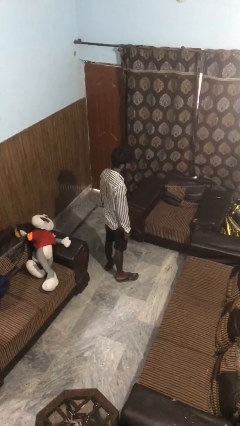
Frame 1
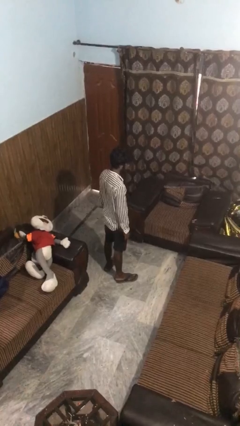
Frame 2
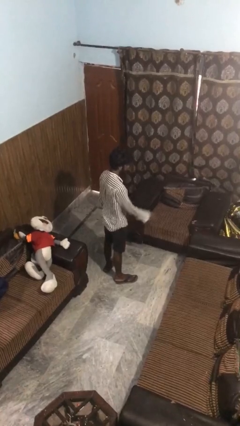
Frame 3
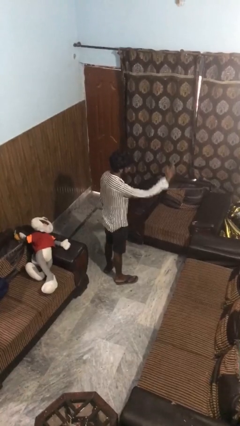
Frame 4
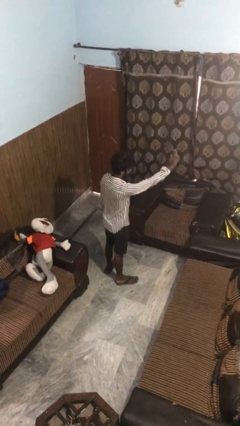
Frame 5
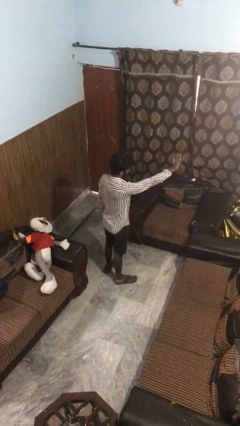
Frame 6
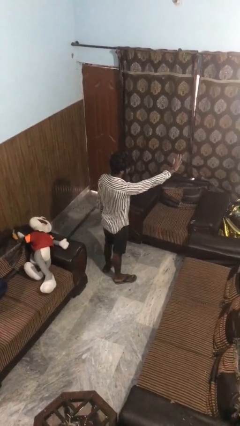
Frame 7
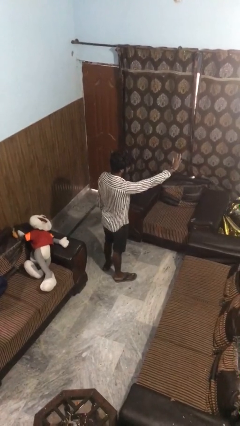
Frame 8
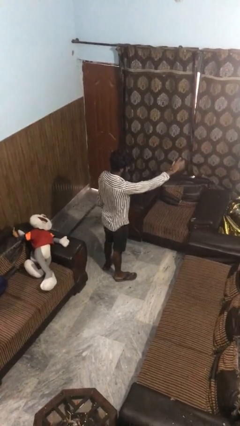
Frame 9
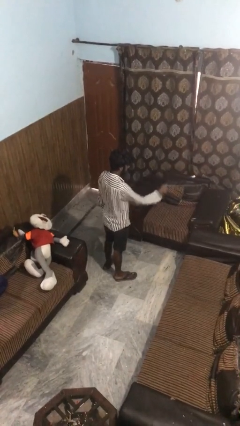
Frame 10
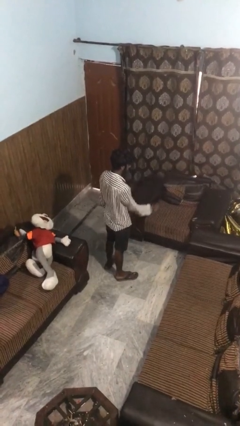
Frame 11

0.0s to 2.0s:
person gestures stop

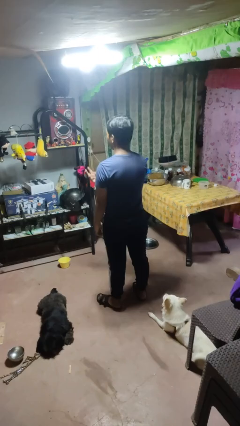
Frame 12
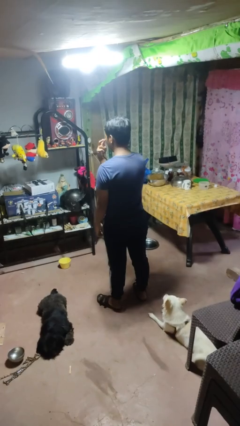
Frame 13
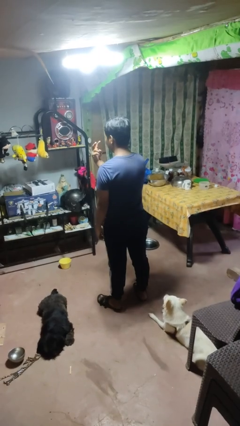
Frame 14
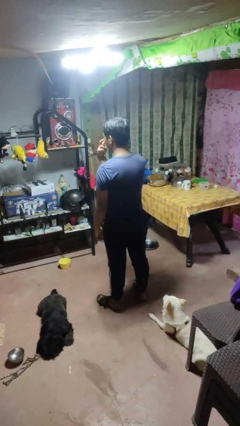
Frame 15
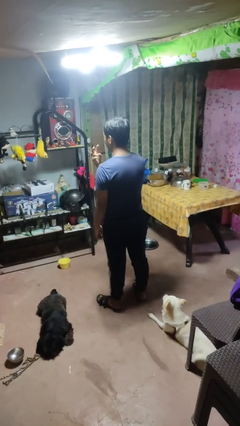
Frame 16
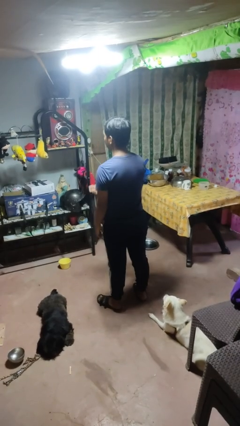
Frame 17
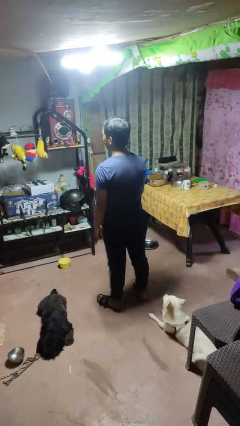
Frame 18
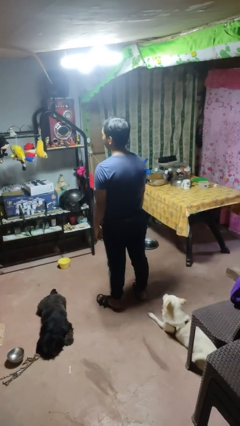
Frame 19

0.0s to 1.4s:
person gestures watch closely

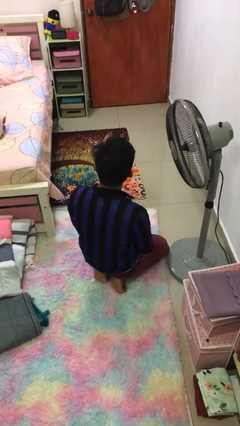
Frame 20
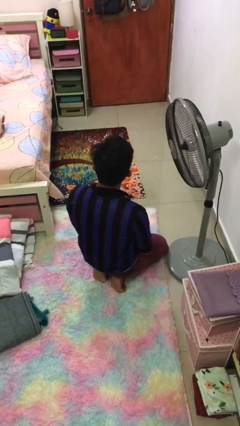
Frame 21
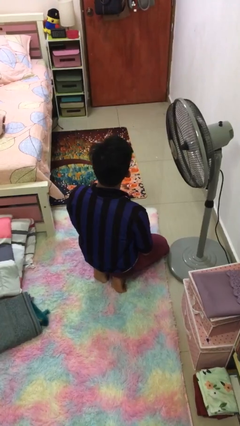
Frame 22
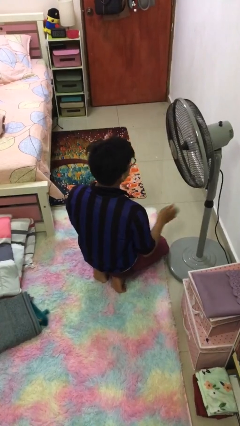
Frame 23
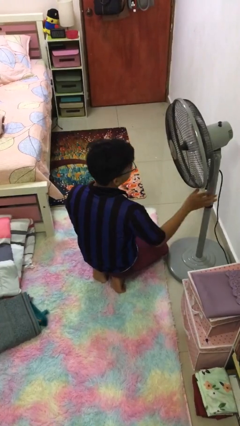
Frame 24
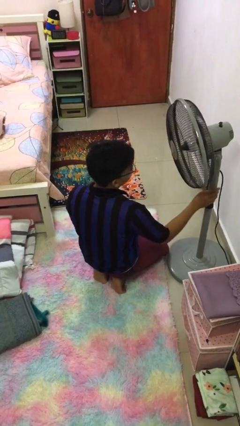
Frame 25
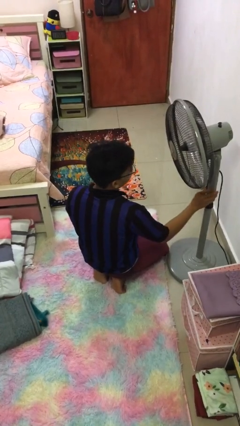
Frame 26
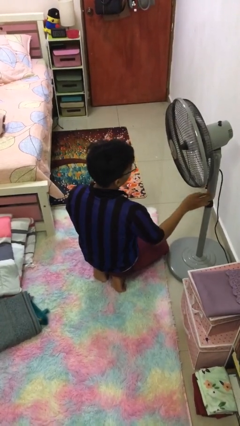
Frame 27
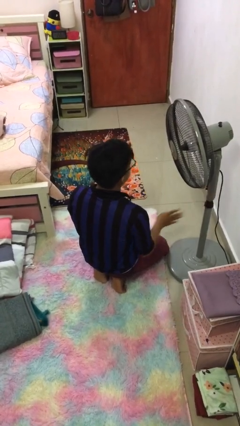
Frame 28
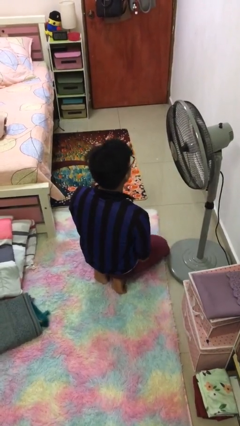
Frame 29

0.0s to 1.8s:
person turns off fan

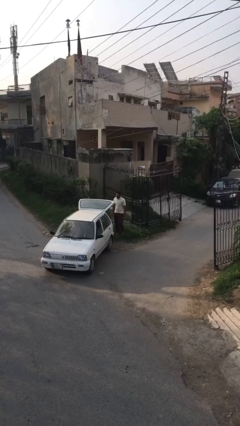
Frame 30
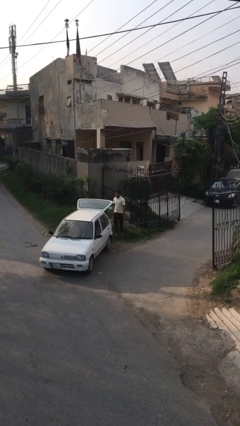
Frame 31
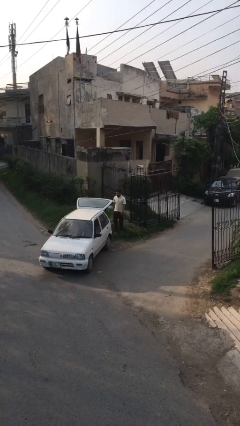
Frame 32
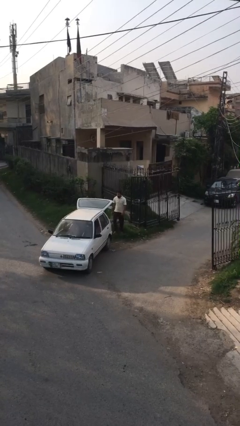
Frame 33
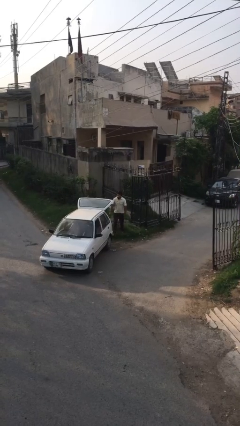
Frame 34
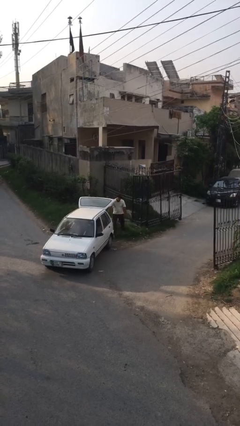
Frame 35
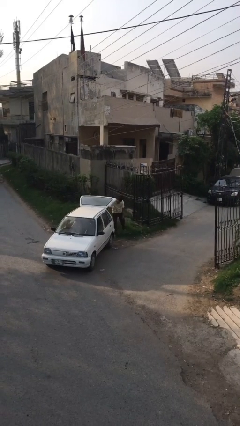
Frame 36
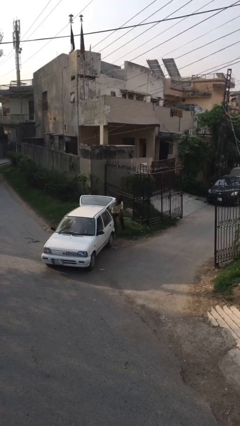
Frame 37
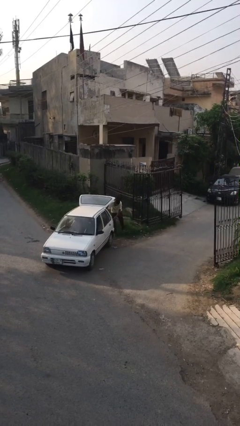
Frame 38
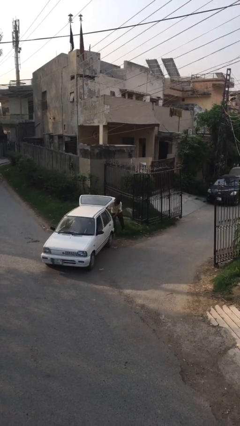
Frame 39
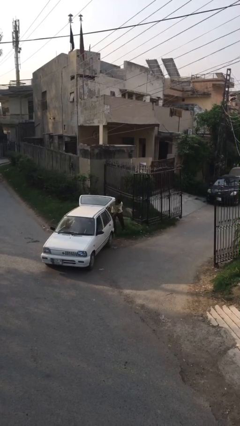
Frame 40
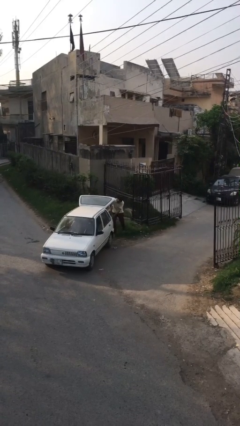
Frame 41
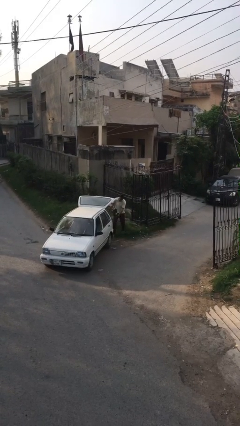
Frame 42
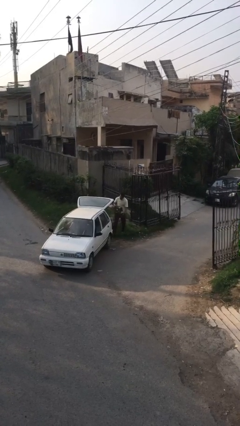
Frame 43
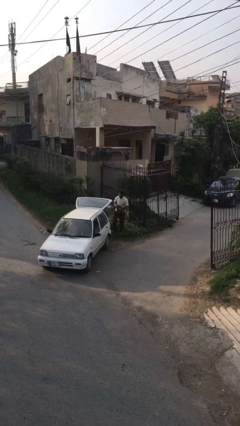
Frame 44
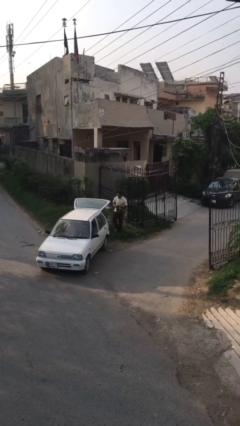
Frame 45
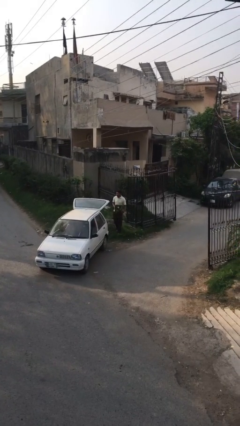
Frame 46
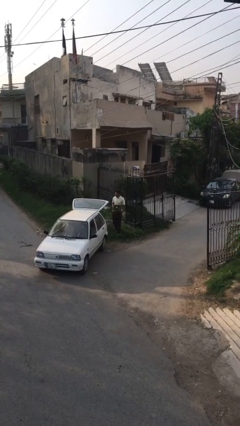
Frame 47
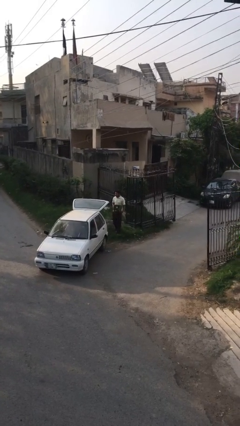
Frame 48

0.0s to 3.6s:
person unloads car

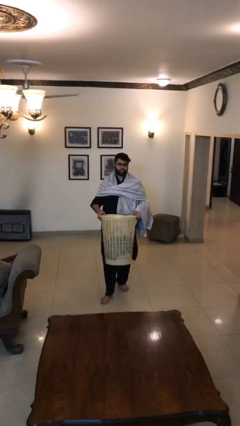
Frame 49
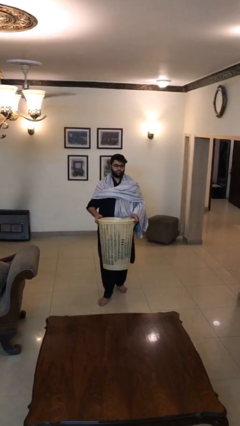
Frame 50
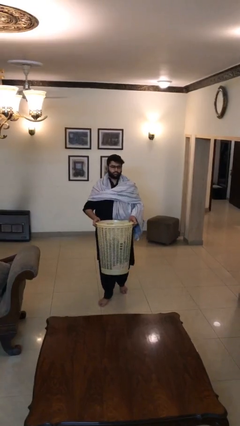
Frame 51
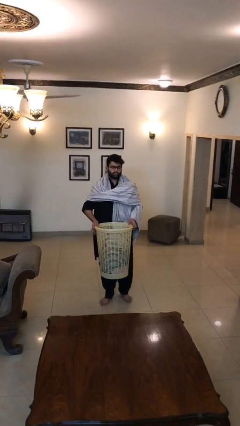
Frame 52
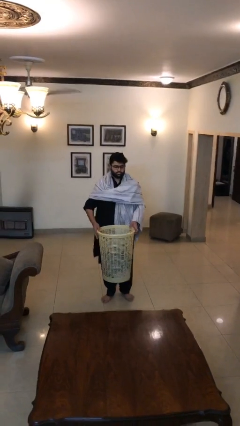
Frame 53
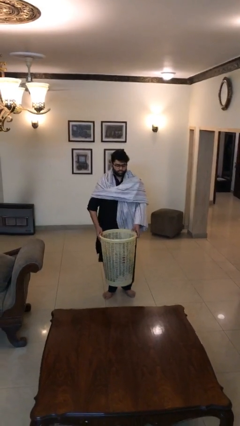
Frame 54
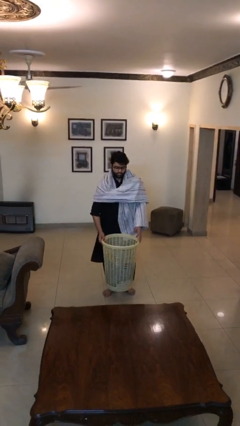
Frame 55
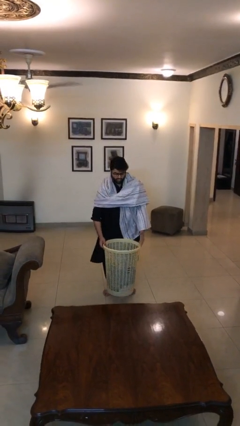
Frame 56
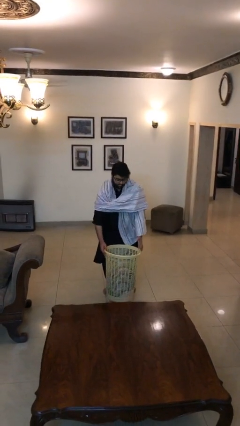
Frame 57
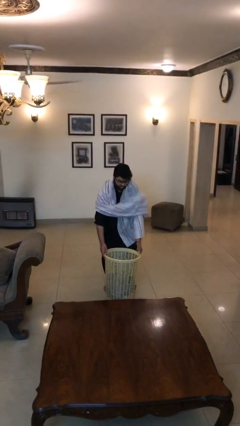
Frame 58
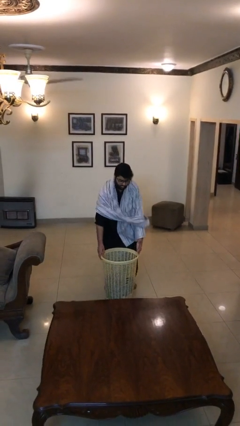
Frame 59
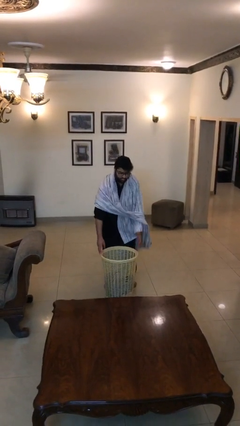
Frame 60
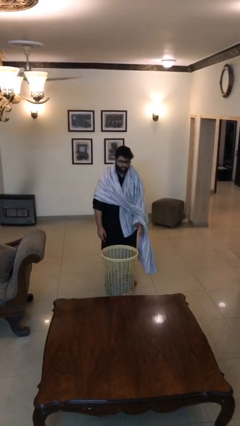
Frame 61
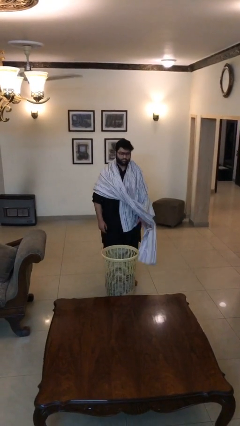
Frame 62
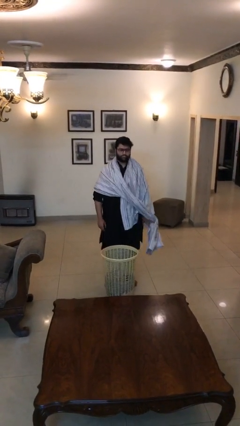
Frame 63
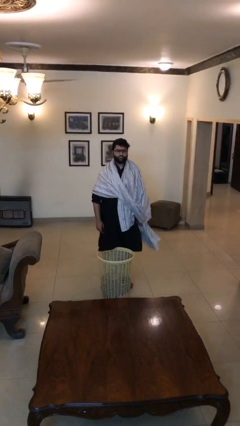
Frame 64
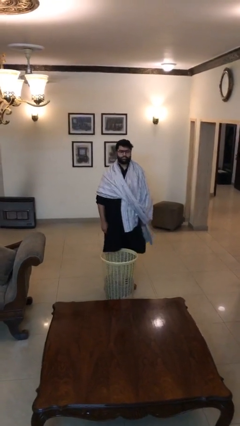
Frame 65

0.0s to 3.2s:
person puts down object on floor

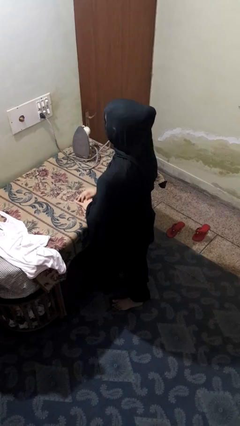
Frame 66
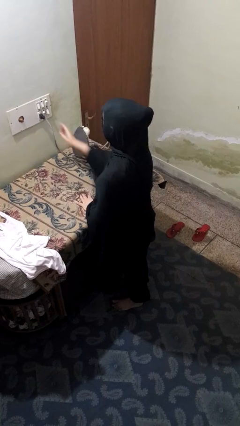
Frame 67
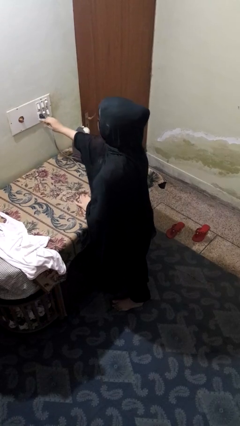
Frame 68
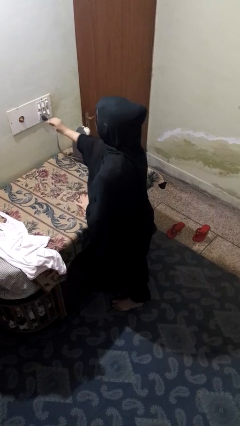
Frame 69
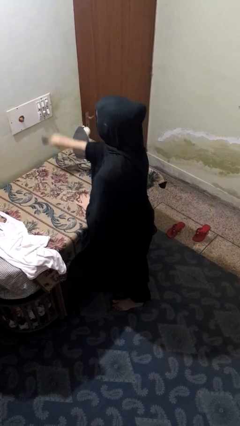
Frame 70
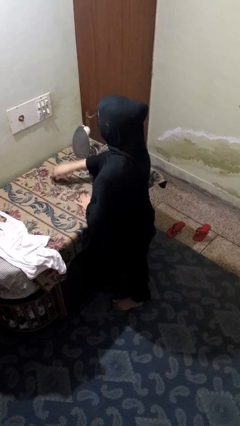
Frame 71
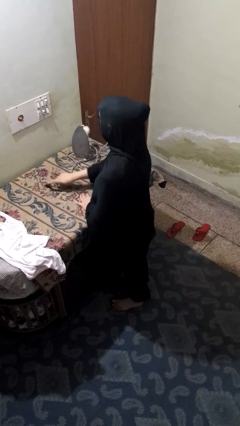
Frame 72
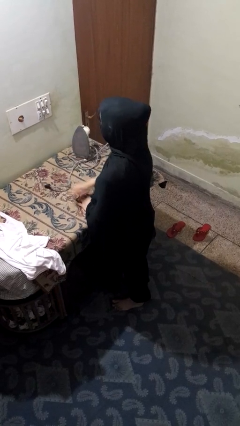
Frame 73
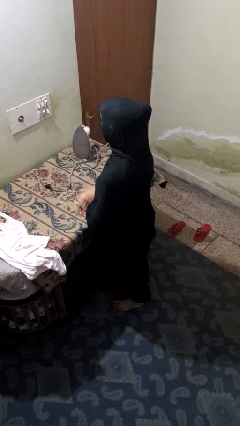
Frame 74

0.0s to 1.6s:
person unplugs from electrical socket

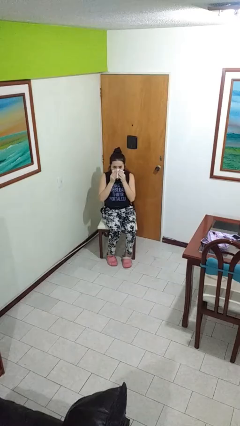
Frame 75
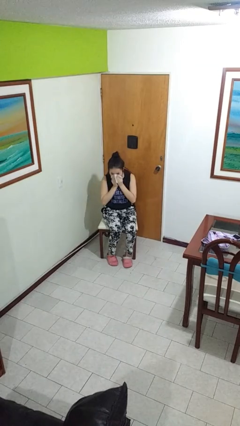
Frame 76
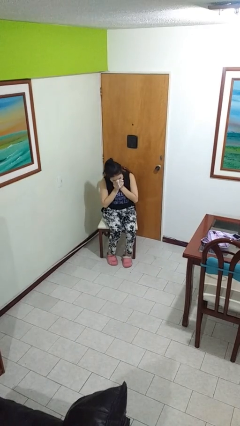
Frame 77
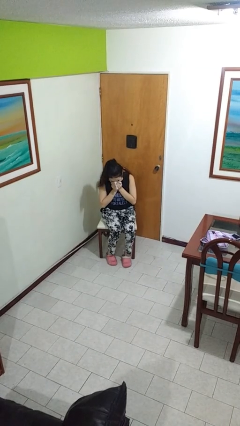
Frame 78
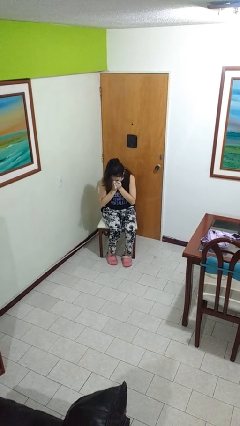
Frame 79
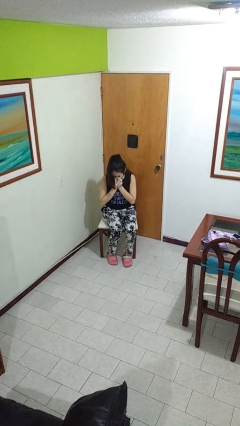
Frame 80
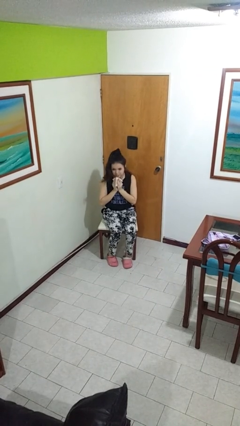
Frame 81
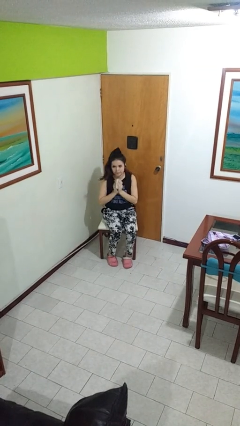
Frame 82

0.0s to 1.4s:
person blows nose

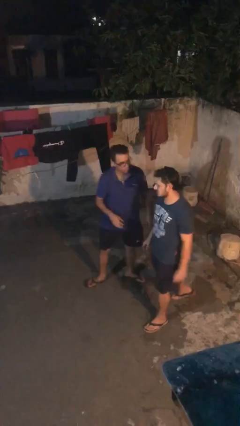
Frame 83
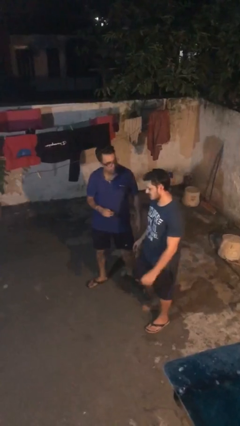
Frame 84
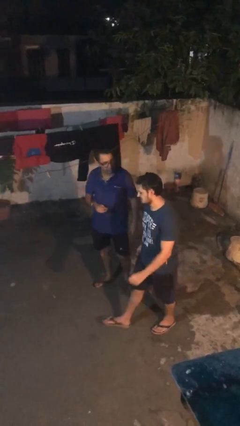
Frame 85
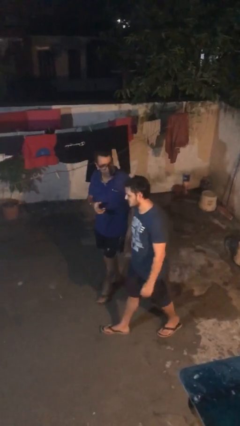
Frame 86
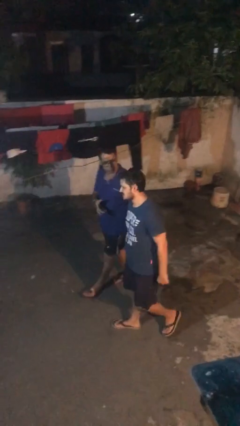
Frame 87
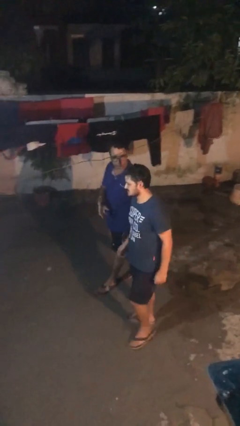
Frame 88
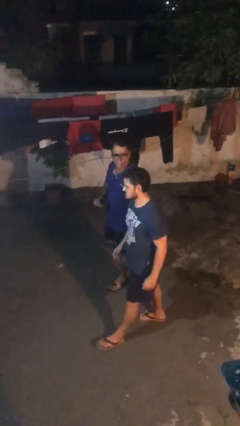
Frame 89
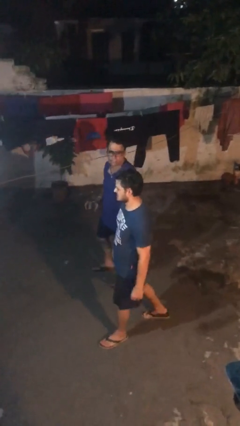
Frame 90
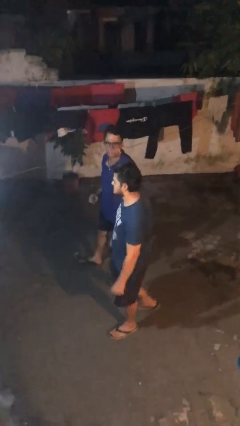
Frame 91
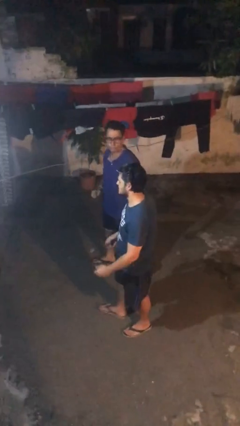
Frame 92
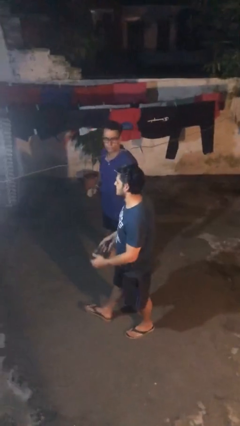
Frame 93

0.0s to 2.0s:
person talks to person
